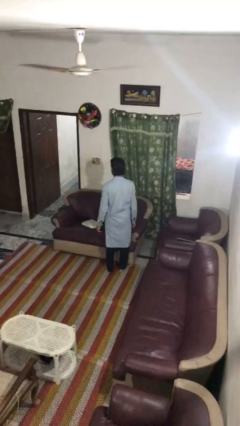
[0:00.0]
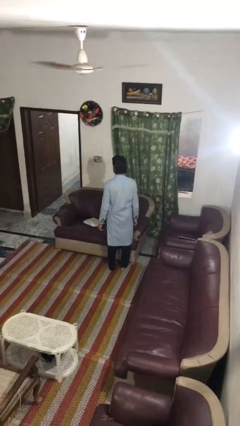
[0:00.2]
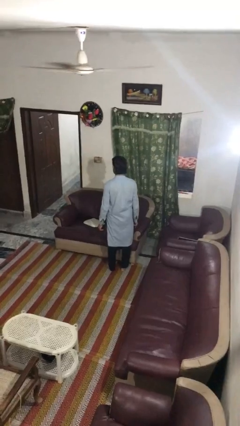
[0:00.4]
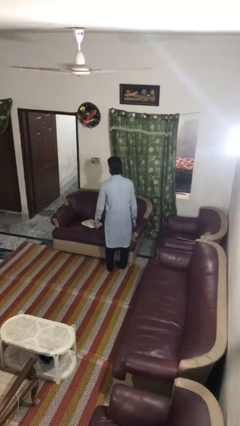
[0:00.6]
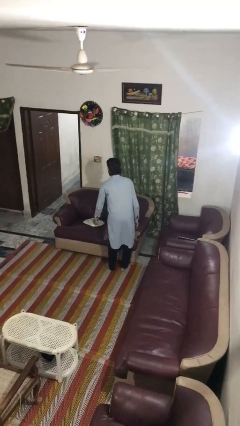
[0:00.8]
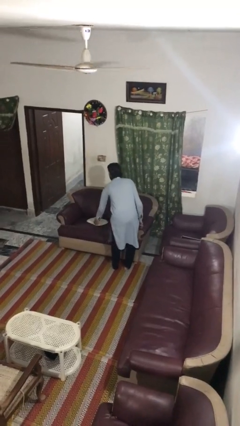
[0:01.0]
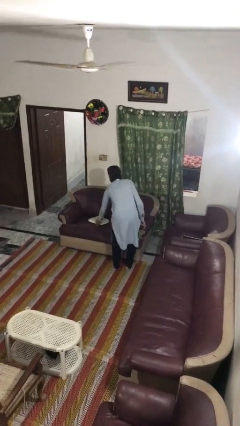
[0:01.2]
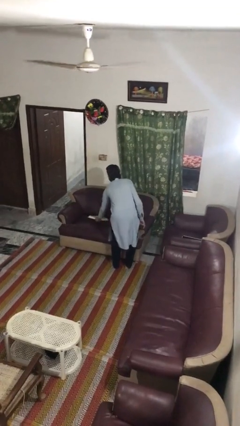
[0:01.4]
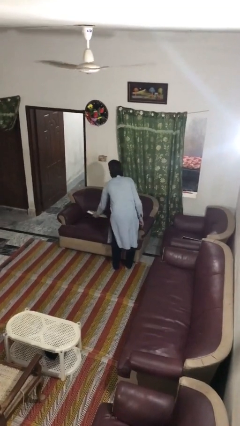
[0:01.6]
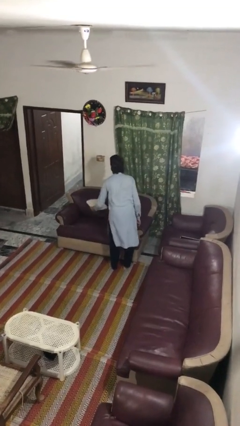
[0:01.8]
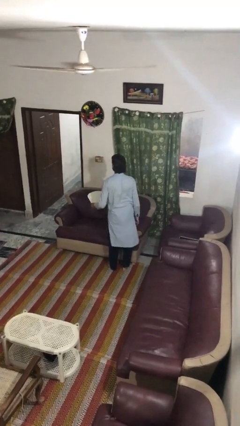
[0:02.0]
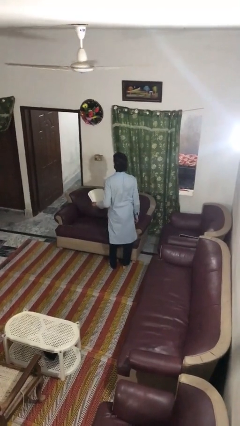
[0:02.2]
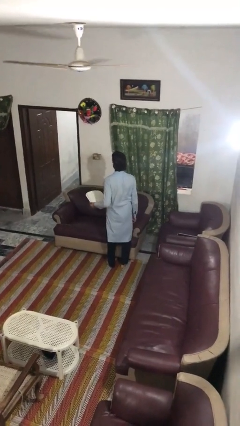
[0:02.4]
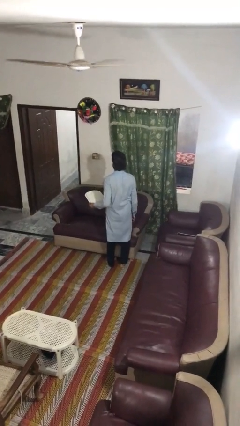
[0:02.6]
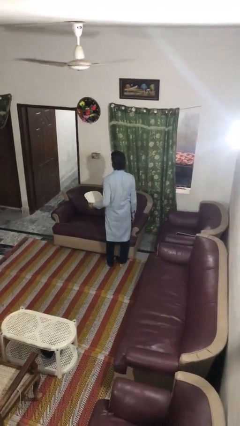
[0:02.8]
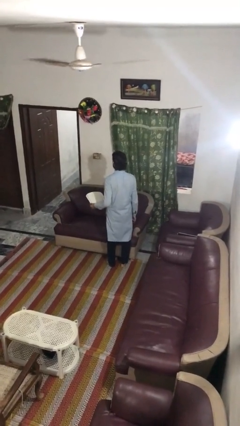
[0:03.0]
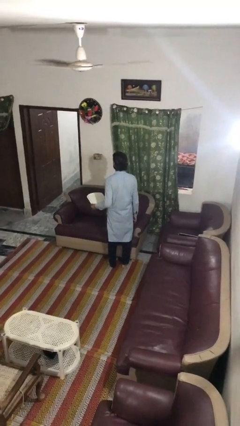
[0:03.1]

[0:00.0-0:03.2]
person picks up object from couch

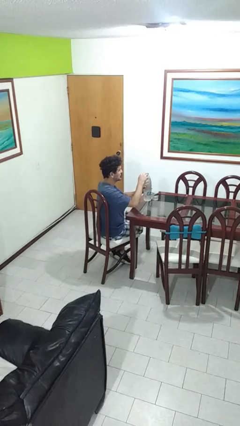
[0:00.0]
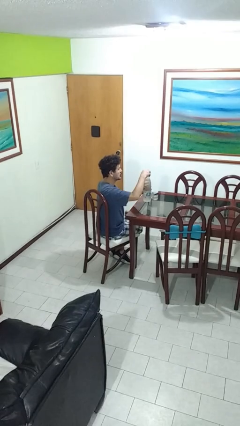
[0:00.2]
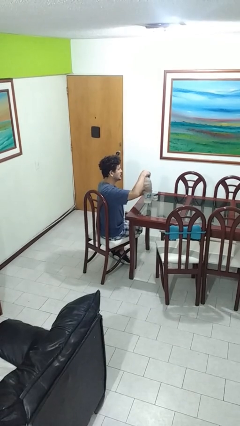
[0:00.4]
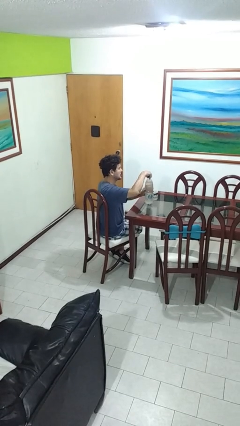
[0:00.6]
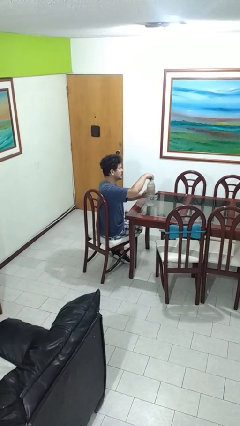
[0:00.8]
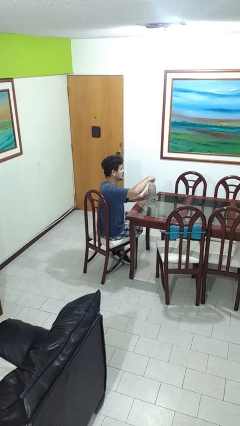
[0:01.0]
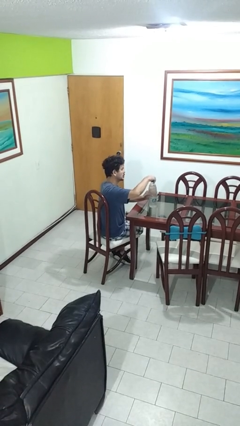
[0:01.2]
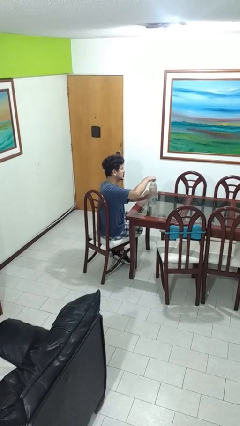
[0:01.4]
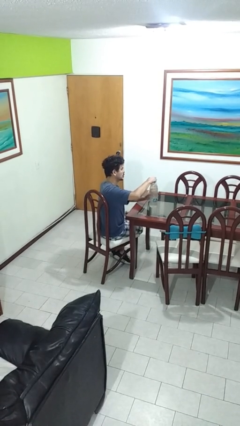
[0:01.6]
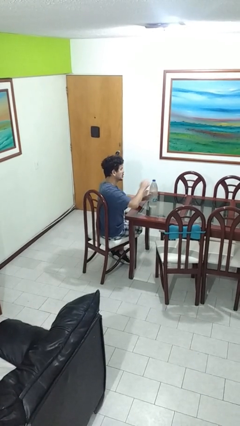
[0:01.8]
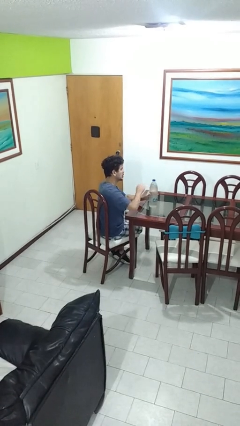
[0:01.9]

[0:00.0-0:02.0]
person screws lid to bottle

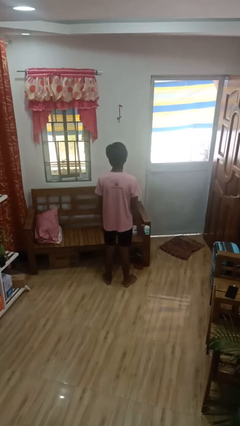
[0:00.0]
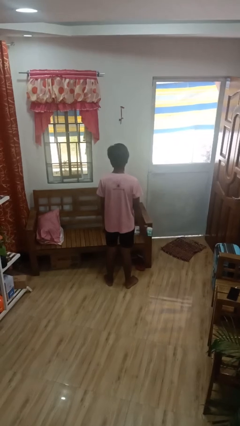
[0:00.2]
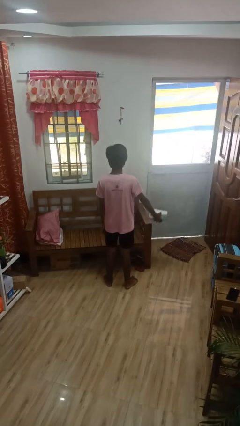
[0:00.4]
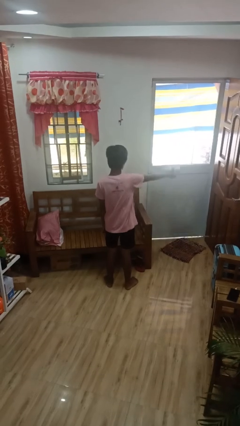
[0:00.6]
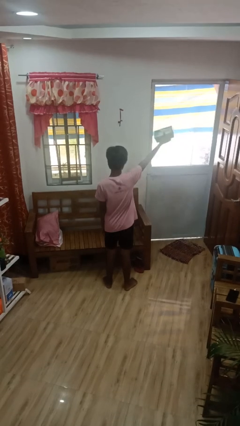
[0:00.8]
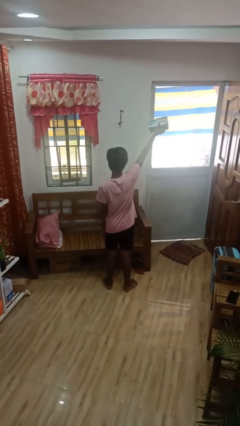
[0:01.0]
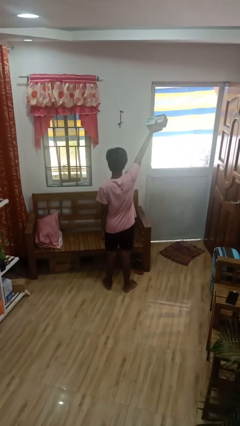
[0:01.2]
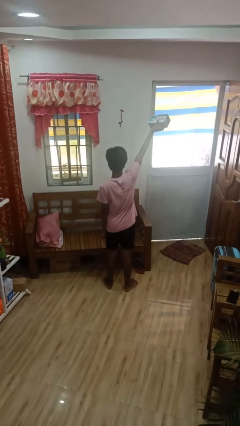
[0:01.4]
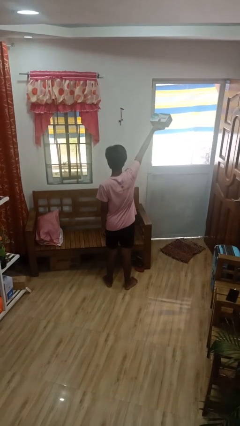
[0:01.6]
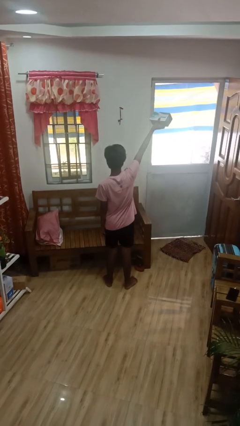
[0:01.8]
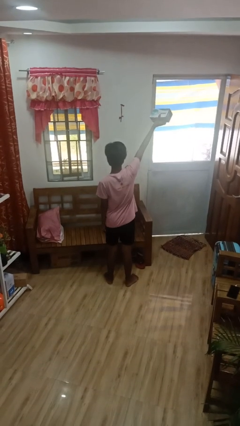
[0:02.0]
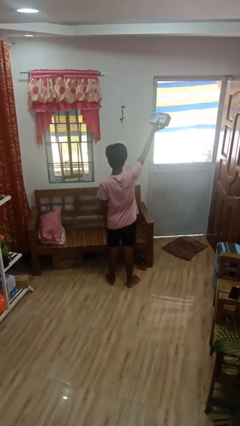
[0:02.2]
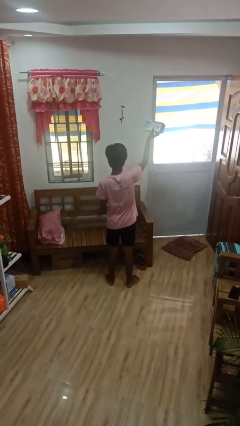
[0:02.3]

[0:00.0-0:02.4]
person holds object above head

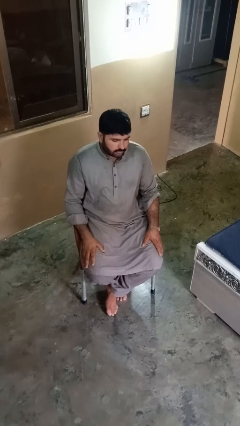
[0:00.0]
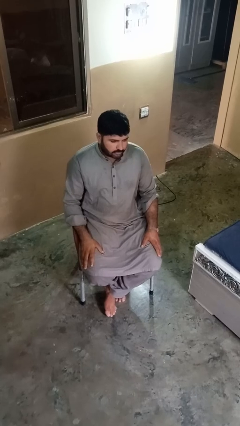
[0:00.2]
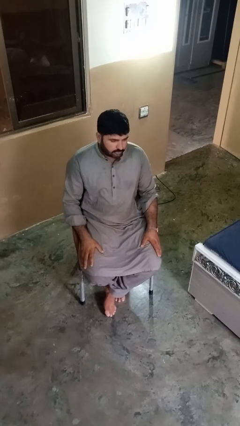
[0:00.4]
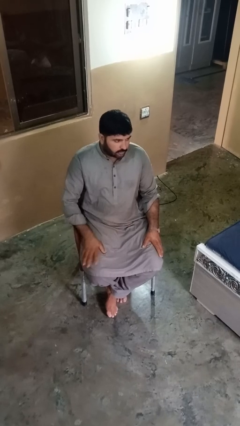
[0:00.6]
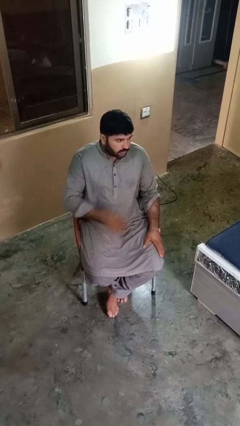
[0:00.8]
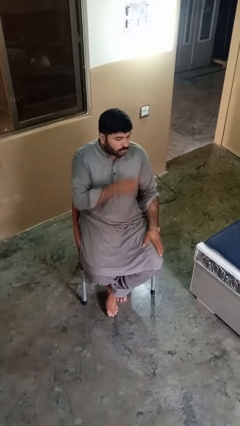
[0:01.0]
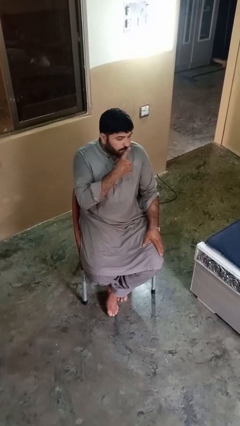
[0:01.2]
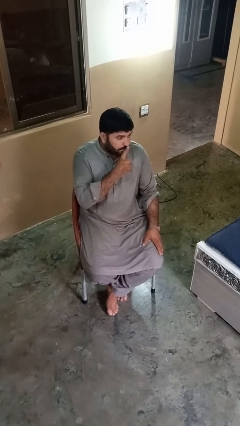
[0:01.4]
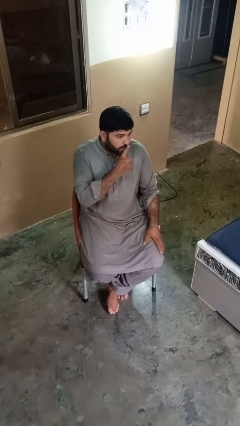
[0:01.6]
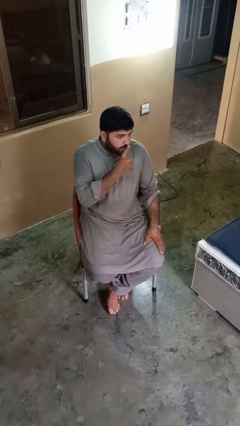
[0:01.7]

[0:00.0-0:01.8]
person gestures be quiet

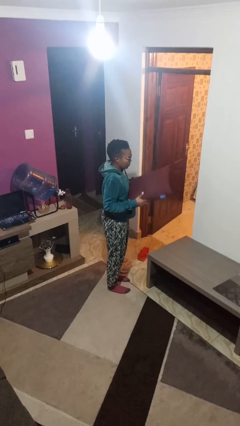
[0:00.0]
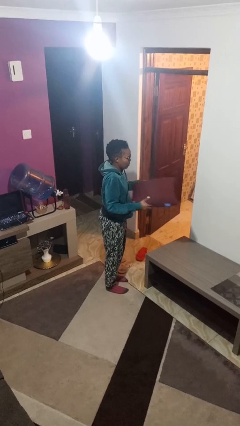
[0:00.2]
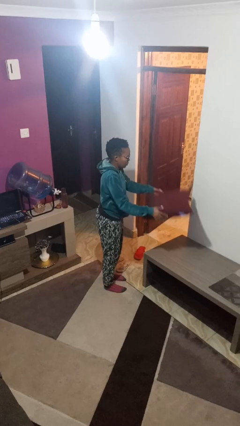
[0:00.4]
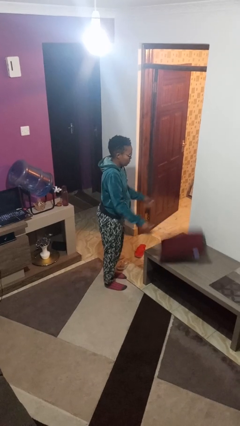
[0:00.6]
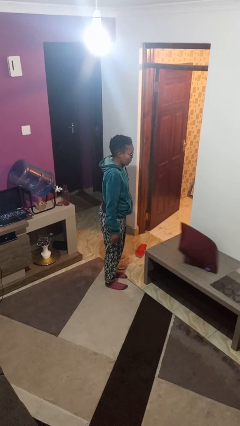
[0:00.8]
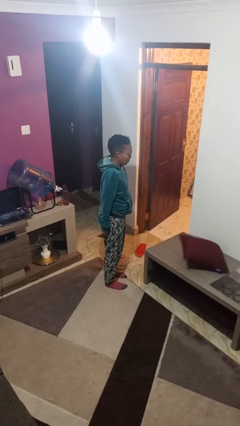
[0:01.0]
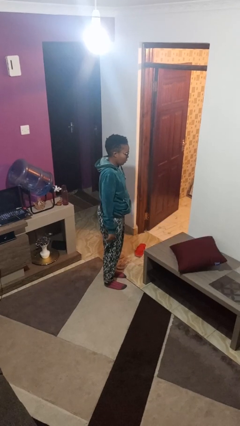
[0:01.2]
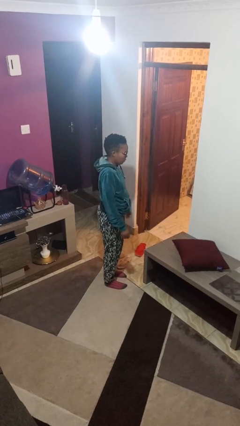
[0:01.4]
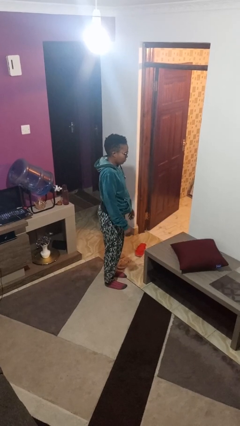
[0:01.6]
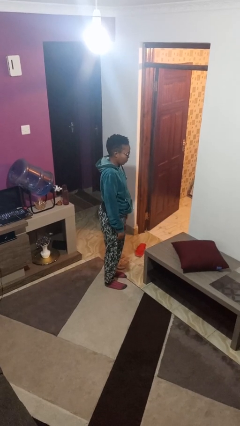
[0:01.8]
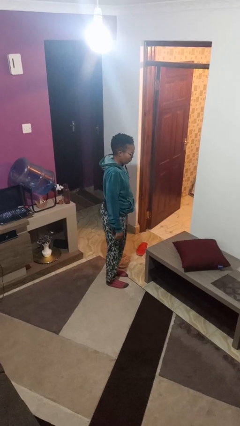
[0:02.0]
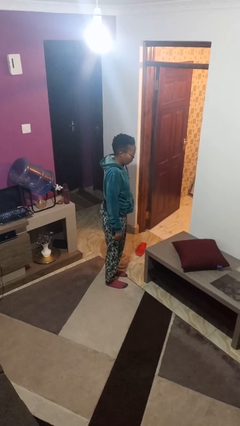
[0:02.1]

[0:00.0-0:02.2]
person throws object on table

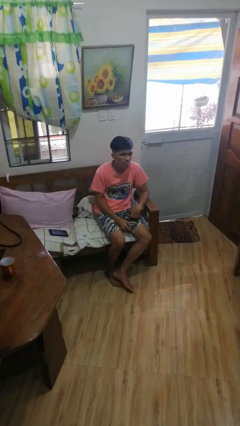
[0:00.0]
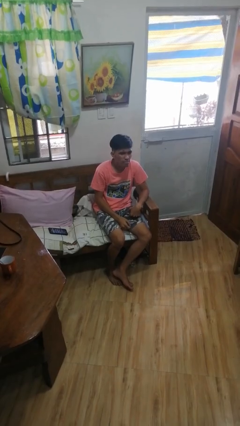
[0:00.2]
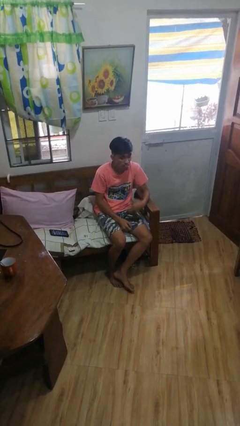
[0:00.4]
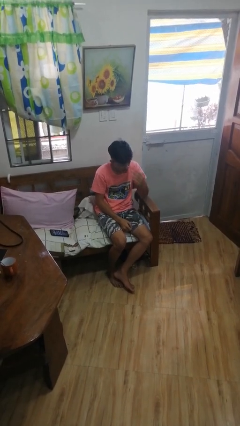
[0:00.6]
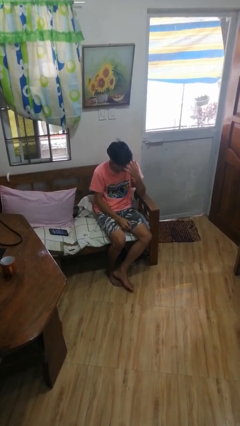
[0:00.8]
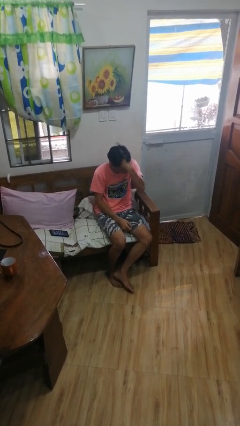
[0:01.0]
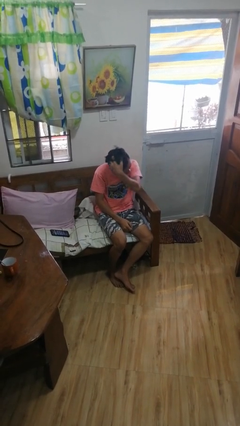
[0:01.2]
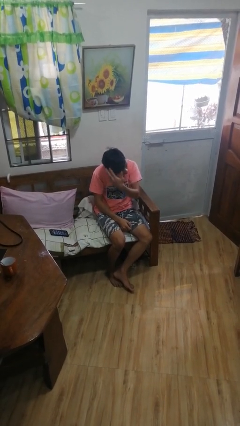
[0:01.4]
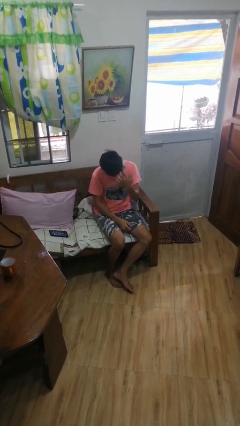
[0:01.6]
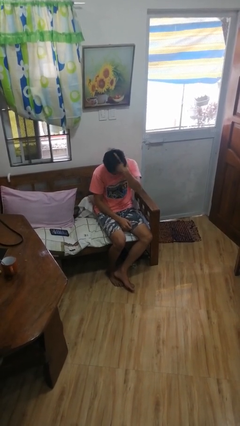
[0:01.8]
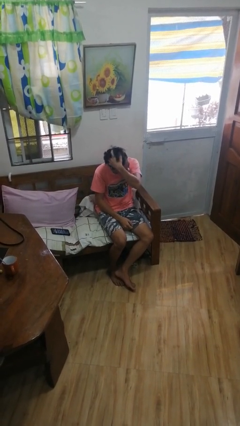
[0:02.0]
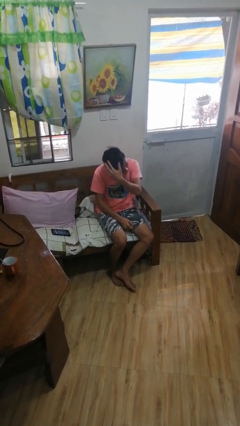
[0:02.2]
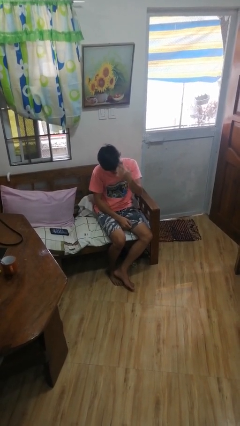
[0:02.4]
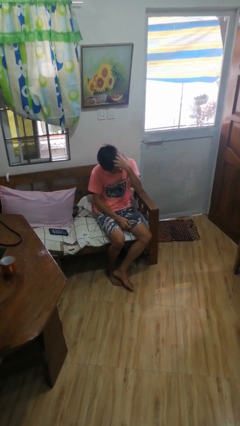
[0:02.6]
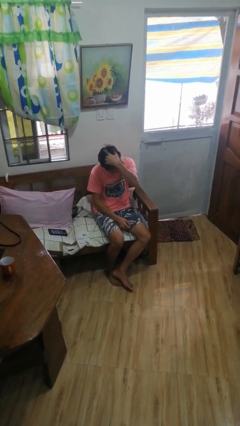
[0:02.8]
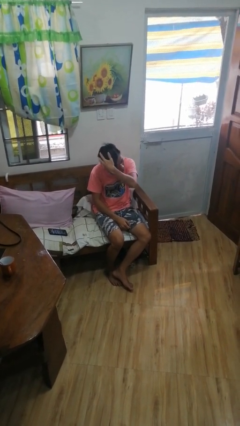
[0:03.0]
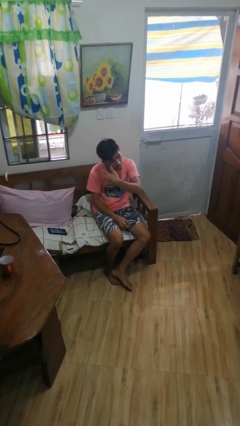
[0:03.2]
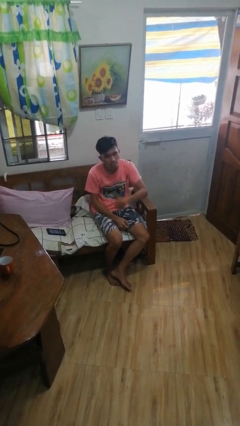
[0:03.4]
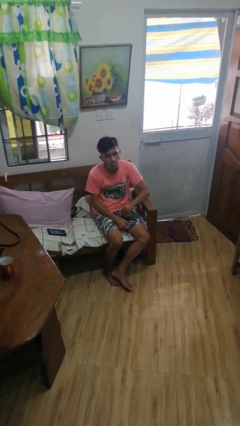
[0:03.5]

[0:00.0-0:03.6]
person strokes hair

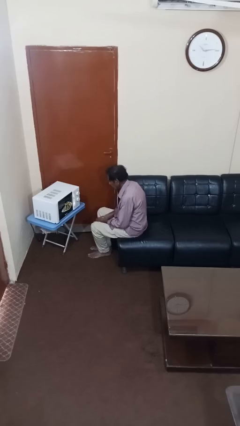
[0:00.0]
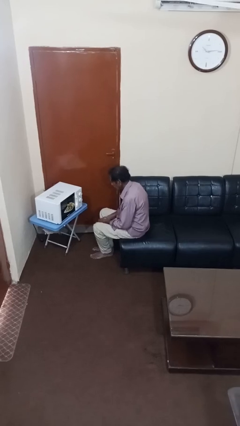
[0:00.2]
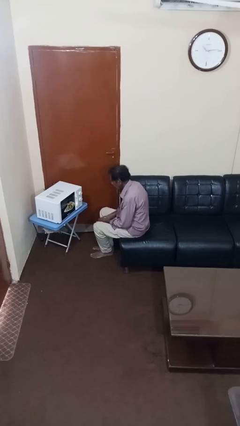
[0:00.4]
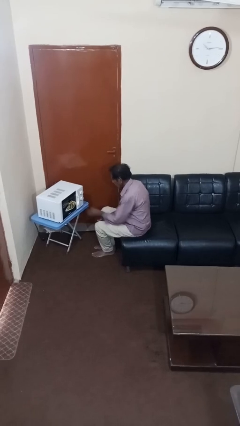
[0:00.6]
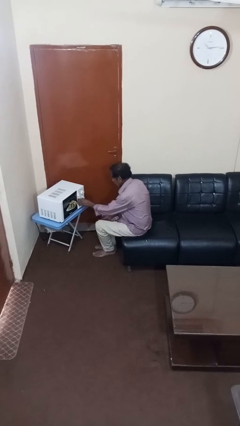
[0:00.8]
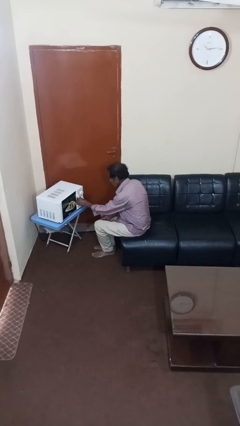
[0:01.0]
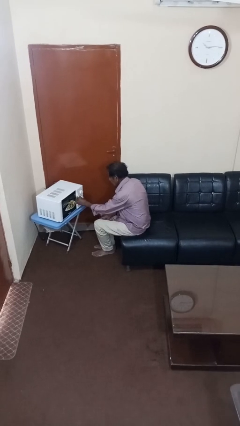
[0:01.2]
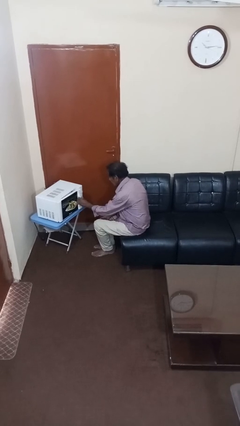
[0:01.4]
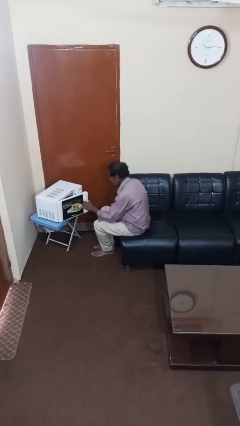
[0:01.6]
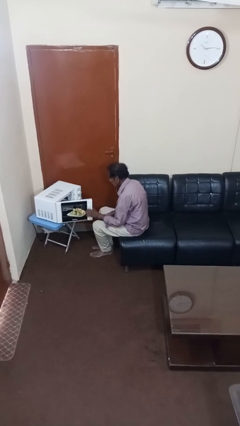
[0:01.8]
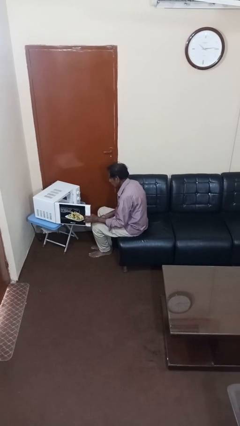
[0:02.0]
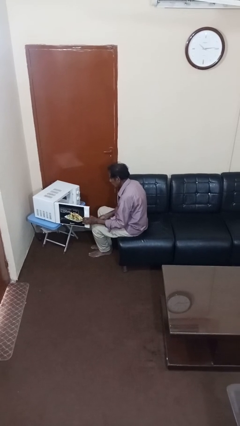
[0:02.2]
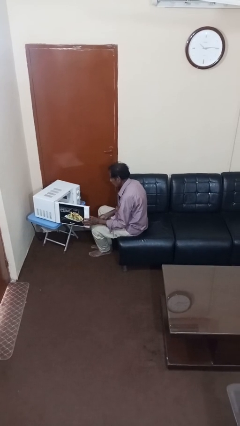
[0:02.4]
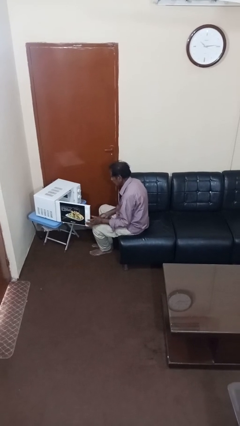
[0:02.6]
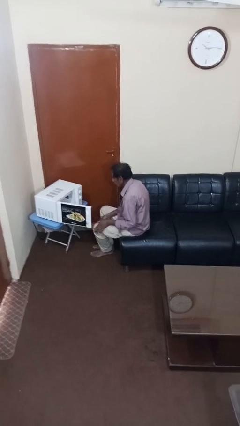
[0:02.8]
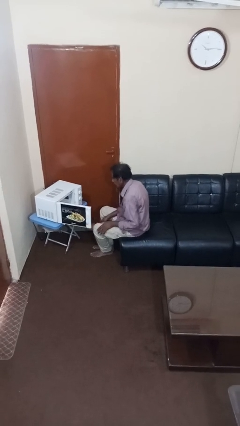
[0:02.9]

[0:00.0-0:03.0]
person opens microwave
